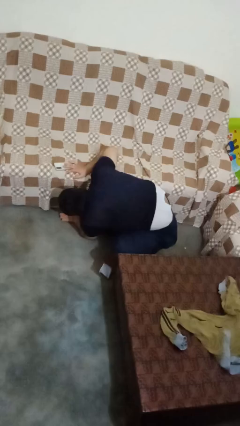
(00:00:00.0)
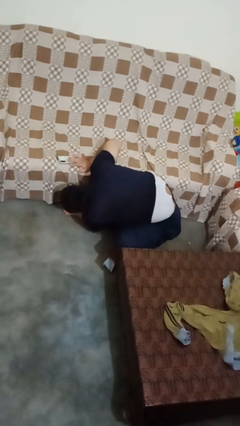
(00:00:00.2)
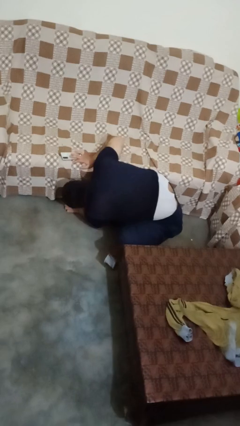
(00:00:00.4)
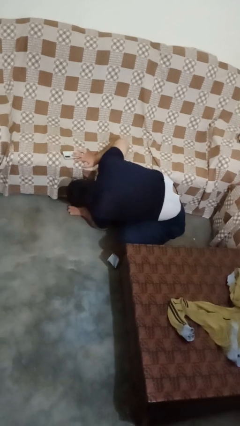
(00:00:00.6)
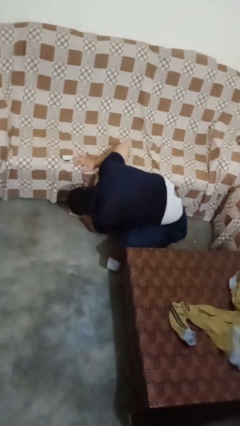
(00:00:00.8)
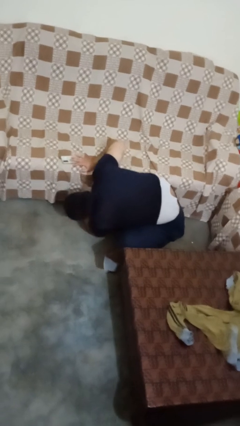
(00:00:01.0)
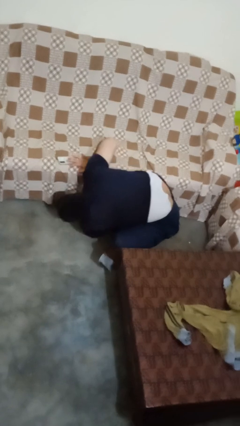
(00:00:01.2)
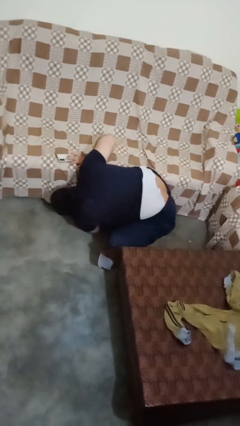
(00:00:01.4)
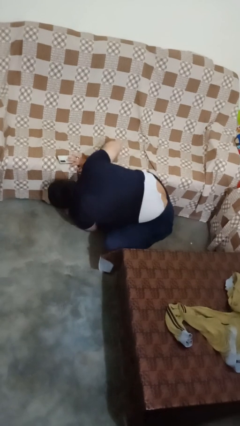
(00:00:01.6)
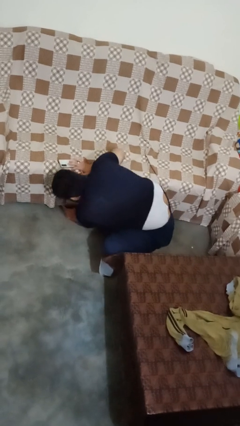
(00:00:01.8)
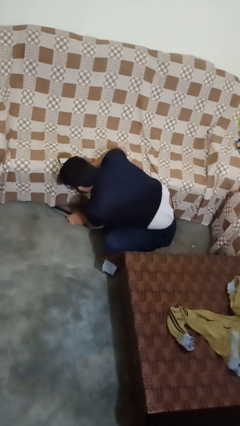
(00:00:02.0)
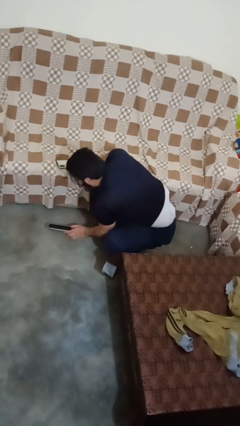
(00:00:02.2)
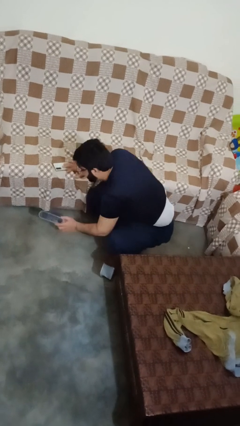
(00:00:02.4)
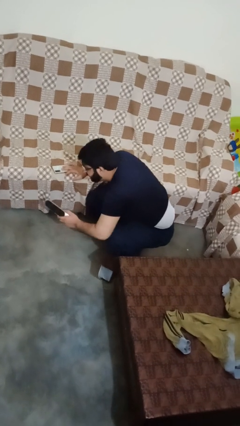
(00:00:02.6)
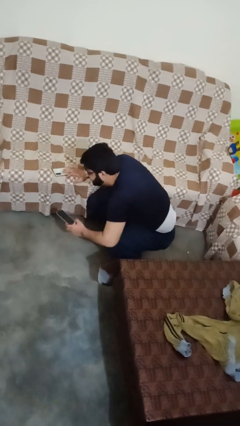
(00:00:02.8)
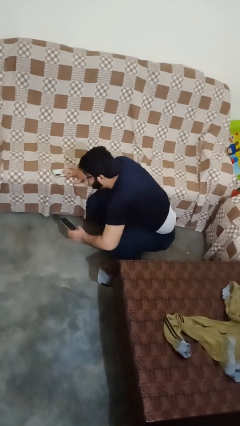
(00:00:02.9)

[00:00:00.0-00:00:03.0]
person searches under couch

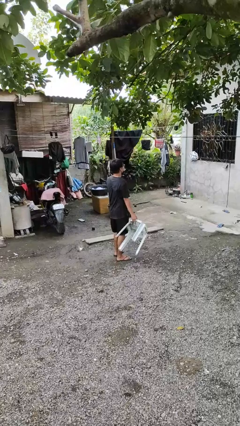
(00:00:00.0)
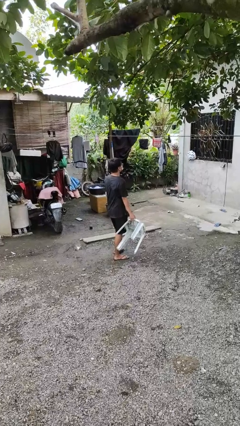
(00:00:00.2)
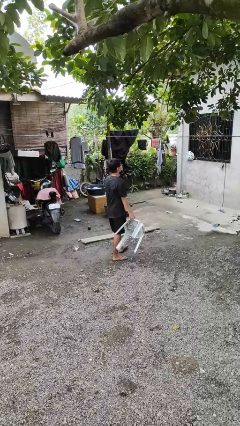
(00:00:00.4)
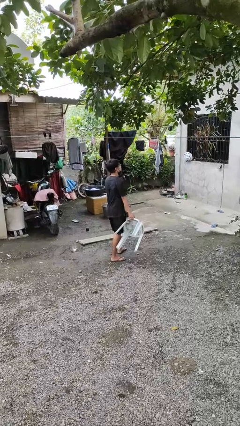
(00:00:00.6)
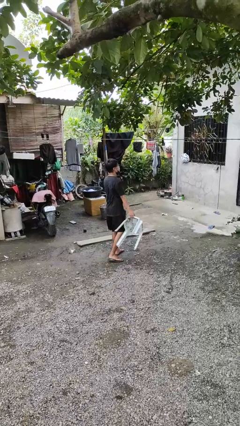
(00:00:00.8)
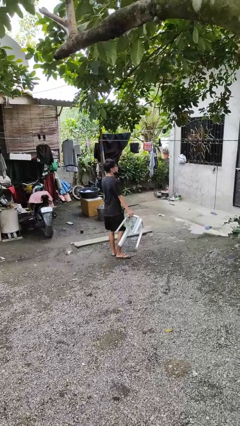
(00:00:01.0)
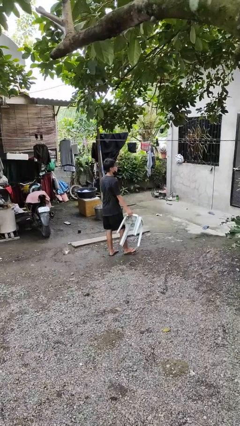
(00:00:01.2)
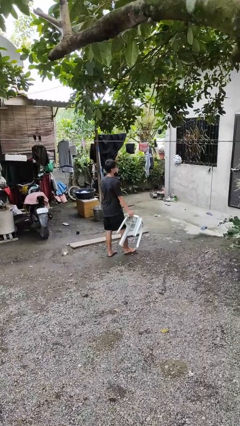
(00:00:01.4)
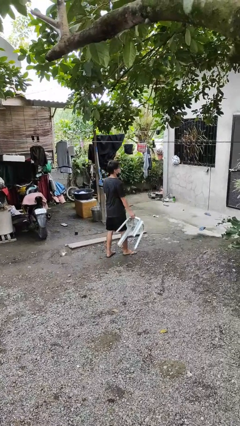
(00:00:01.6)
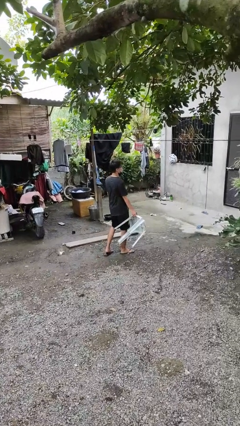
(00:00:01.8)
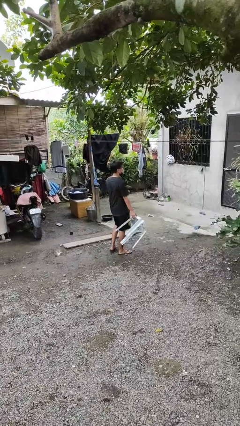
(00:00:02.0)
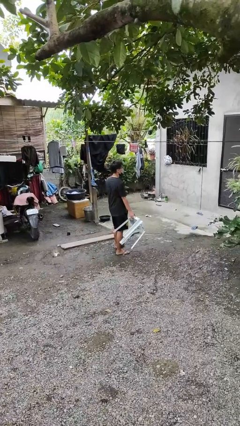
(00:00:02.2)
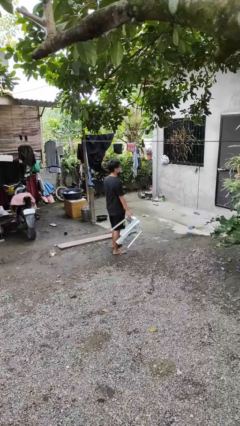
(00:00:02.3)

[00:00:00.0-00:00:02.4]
person carries furniture

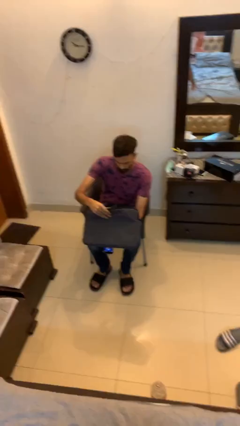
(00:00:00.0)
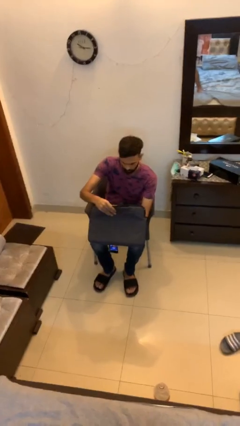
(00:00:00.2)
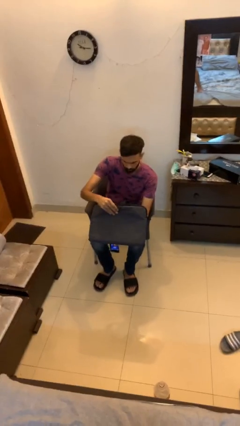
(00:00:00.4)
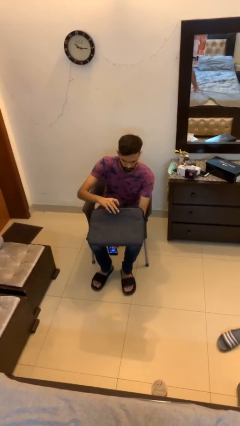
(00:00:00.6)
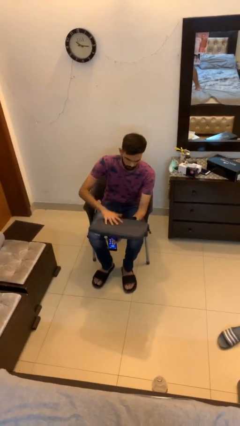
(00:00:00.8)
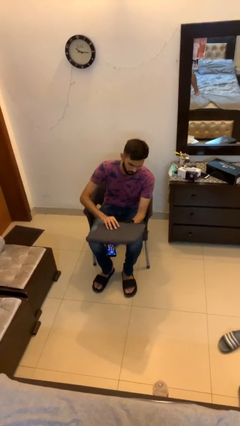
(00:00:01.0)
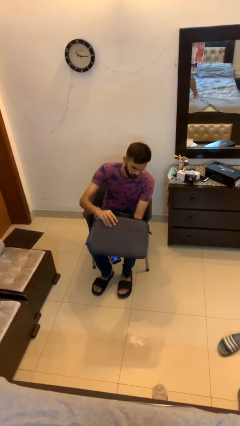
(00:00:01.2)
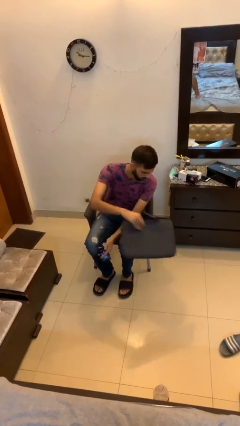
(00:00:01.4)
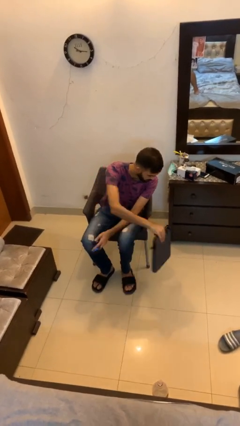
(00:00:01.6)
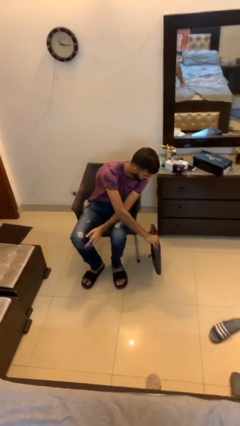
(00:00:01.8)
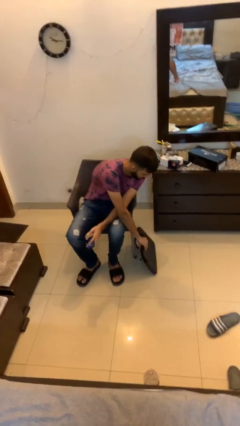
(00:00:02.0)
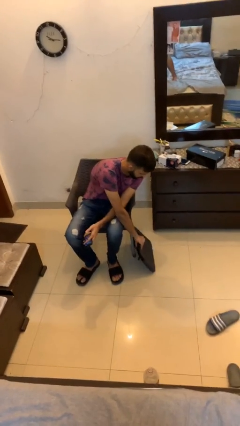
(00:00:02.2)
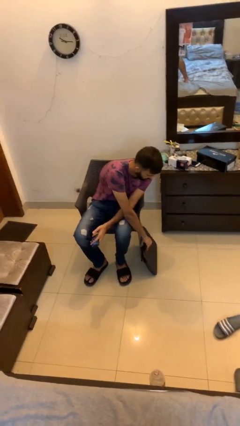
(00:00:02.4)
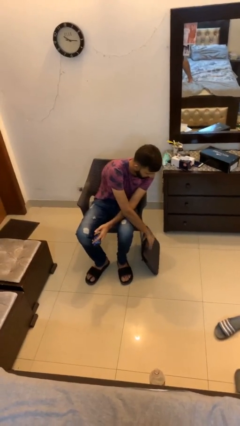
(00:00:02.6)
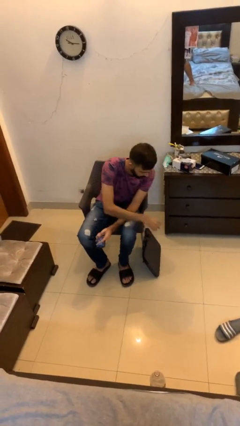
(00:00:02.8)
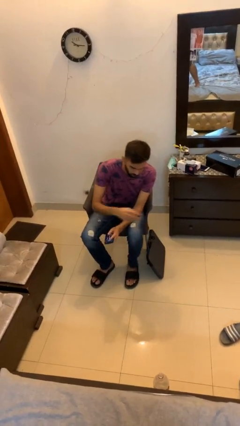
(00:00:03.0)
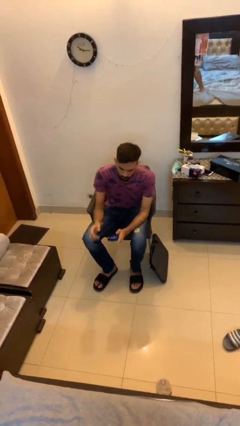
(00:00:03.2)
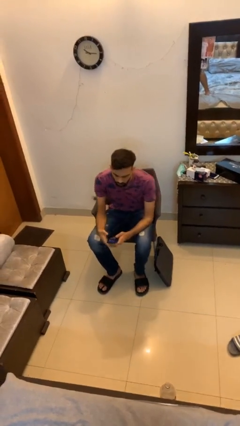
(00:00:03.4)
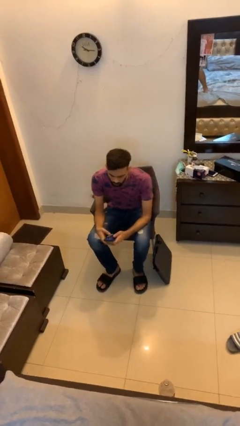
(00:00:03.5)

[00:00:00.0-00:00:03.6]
person puts down object on floor

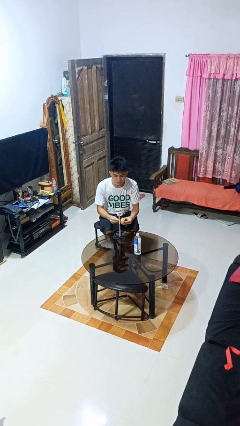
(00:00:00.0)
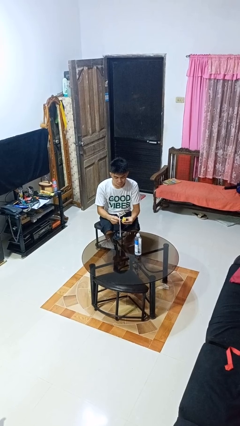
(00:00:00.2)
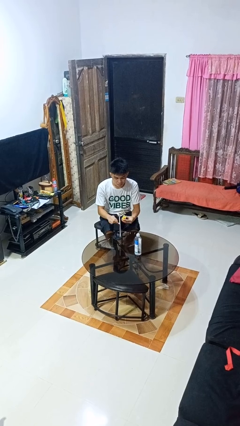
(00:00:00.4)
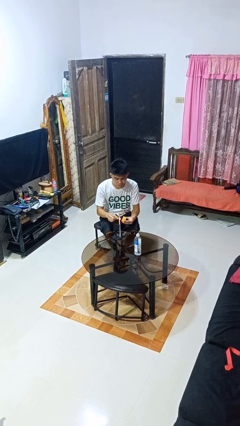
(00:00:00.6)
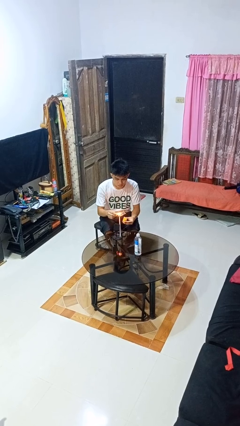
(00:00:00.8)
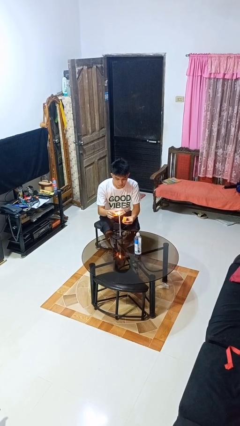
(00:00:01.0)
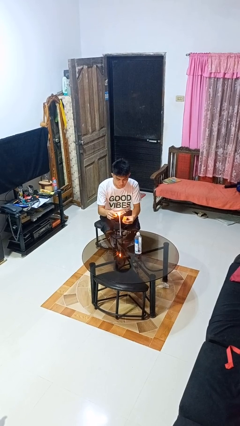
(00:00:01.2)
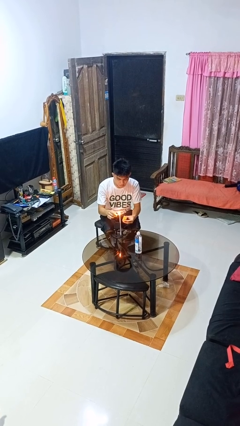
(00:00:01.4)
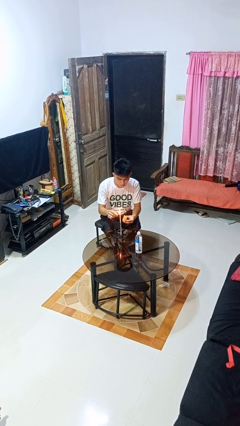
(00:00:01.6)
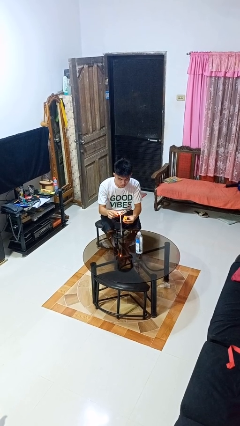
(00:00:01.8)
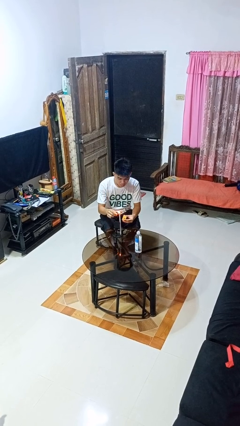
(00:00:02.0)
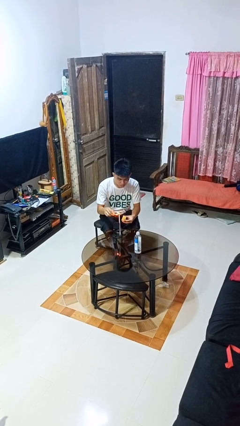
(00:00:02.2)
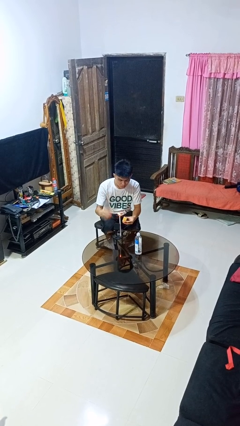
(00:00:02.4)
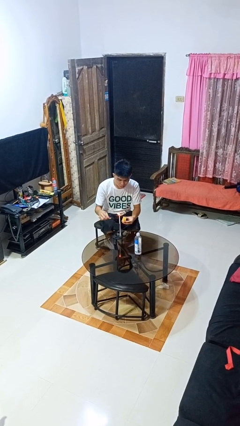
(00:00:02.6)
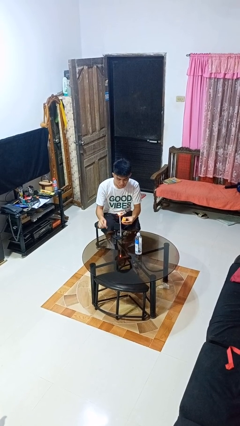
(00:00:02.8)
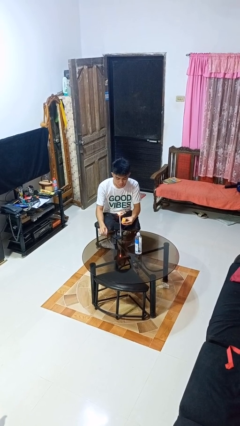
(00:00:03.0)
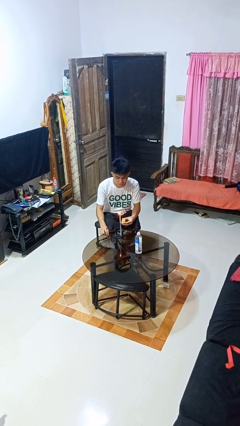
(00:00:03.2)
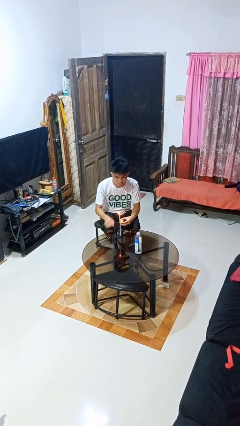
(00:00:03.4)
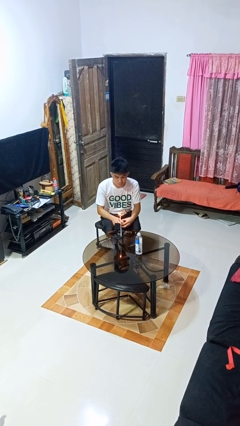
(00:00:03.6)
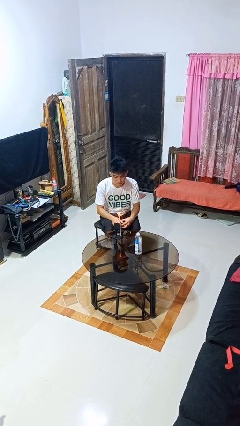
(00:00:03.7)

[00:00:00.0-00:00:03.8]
person lights candle

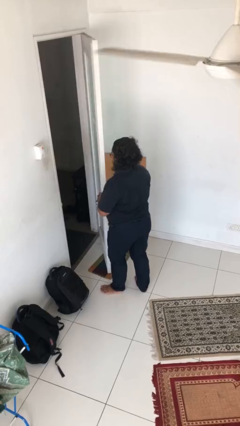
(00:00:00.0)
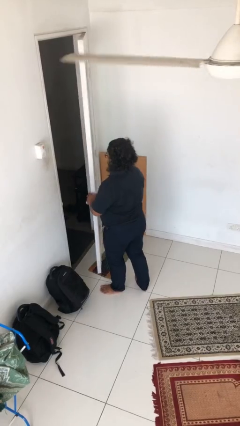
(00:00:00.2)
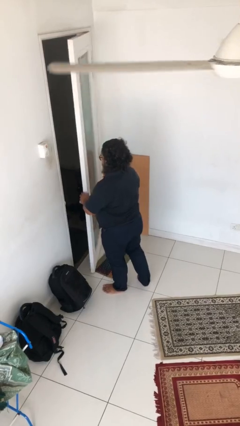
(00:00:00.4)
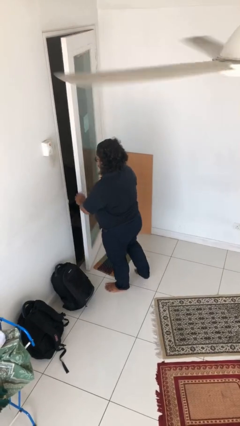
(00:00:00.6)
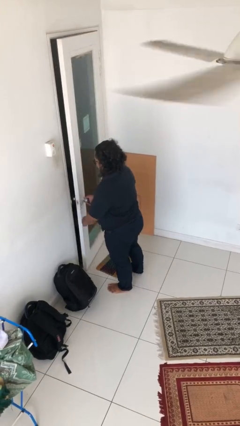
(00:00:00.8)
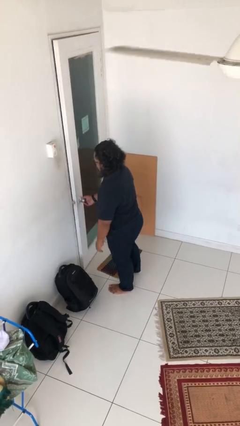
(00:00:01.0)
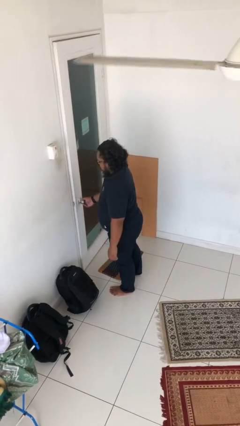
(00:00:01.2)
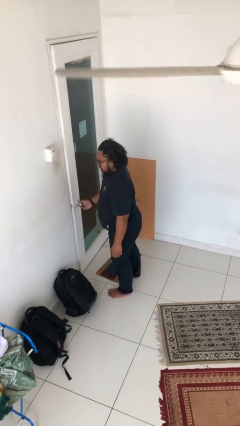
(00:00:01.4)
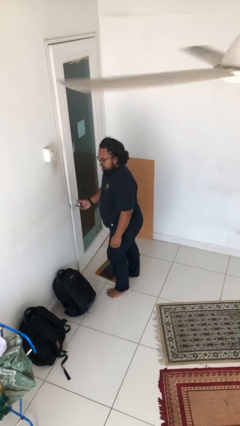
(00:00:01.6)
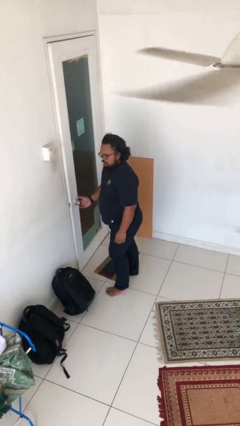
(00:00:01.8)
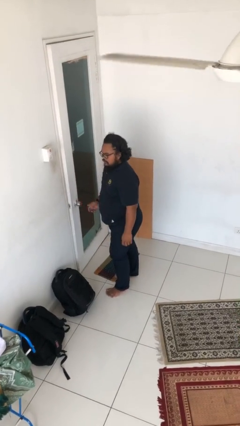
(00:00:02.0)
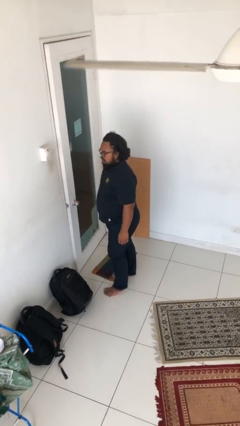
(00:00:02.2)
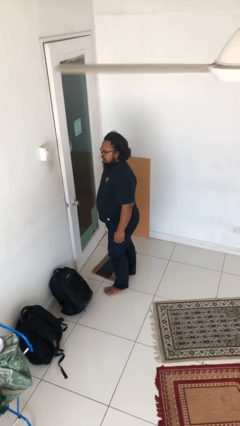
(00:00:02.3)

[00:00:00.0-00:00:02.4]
person closes facility door

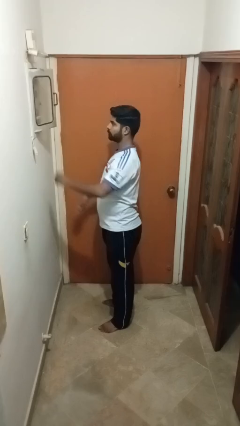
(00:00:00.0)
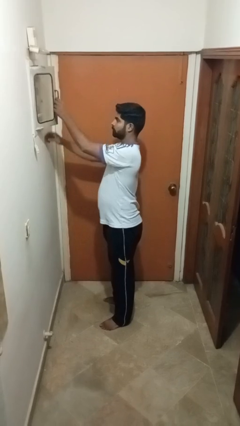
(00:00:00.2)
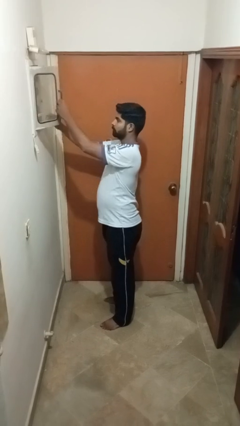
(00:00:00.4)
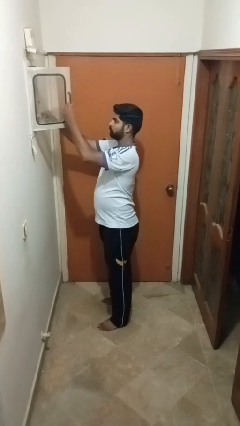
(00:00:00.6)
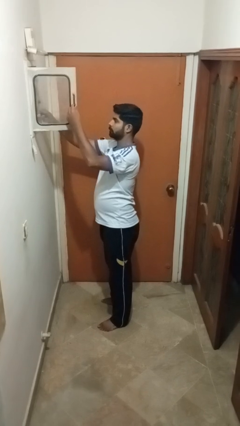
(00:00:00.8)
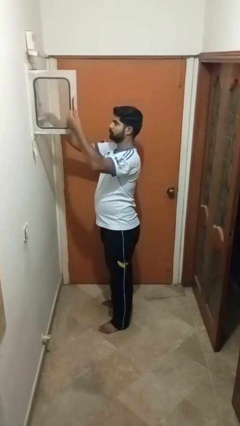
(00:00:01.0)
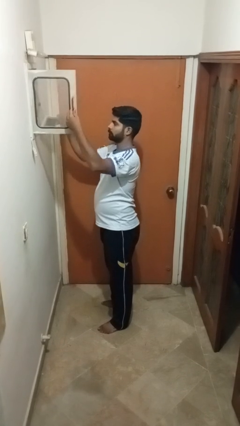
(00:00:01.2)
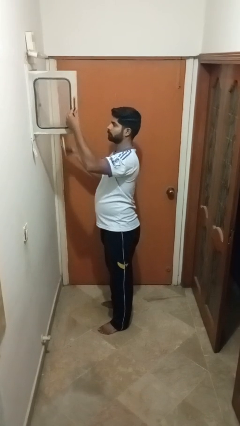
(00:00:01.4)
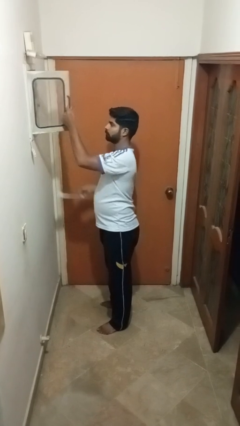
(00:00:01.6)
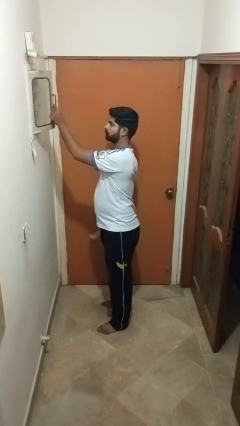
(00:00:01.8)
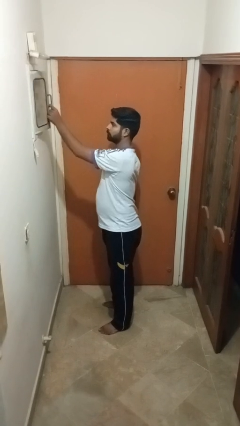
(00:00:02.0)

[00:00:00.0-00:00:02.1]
person takes letters from mailbox

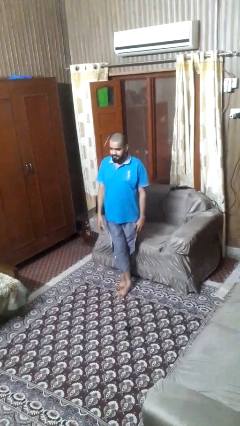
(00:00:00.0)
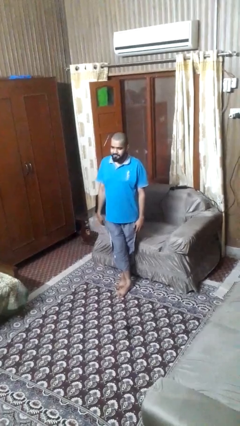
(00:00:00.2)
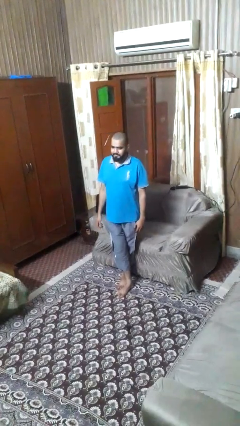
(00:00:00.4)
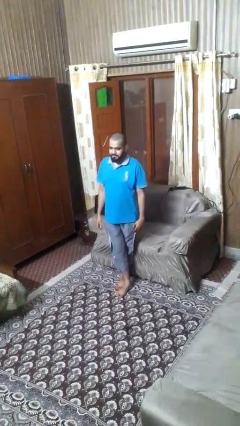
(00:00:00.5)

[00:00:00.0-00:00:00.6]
person gestures thumbs up
